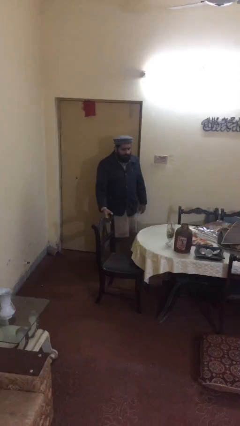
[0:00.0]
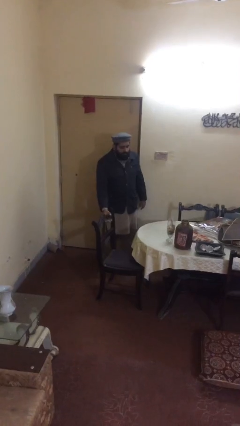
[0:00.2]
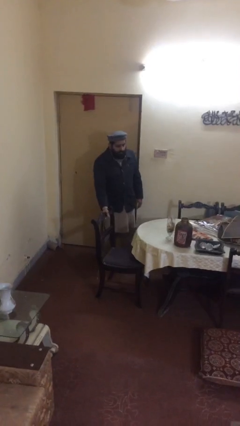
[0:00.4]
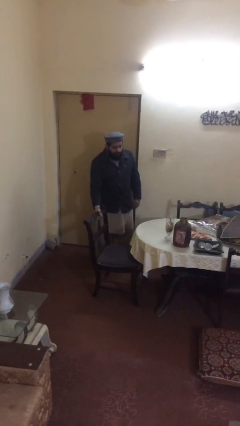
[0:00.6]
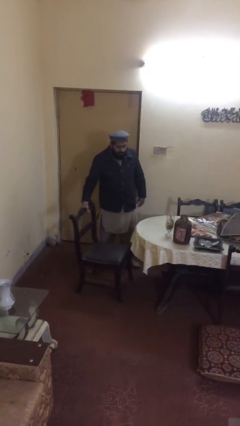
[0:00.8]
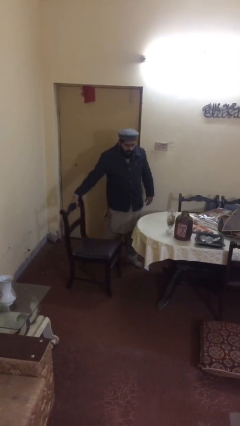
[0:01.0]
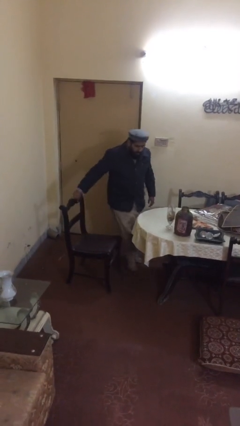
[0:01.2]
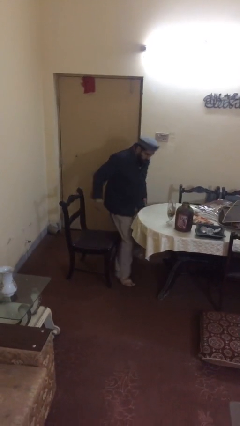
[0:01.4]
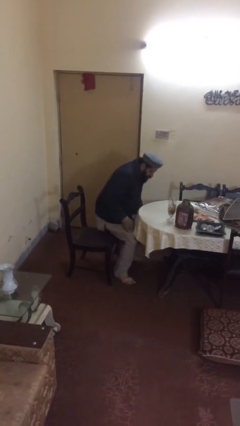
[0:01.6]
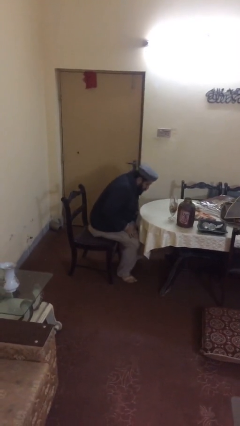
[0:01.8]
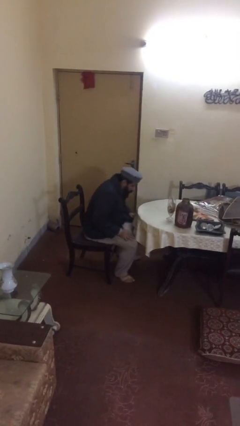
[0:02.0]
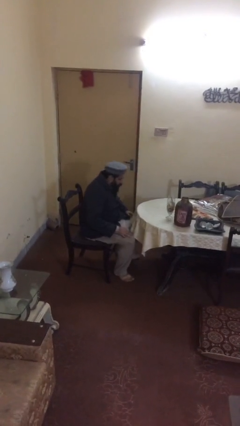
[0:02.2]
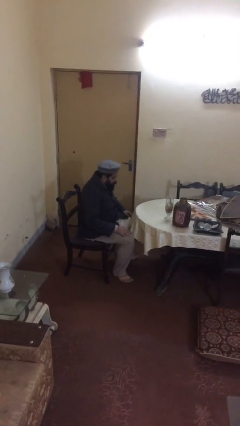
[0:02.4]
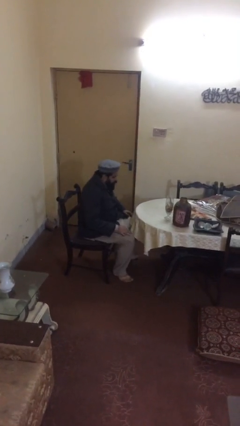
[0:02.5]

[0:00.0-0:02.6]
person sits down

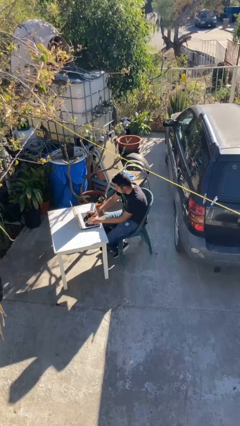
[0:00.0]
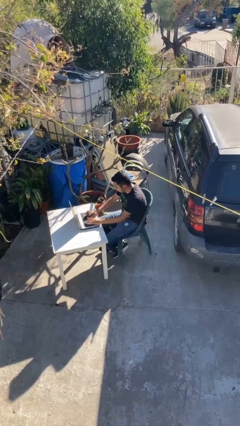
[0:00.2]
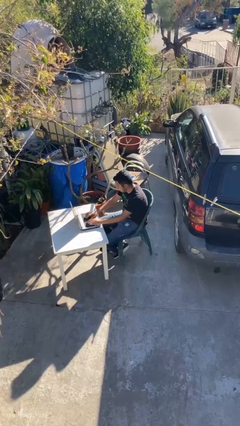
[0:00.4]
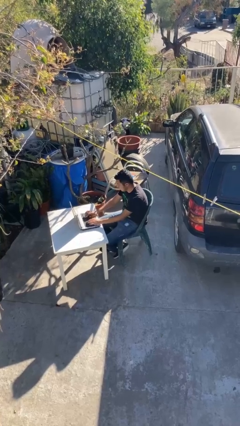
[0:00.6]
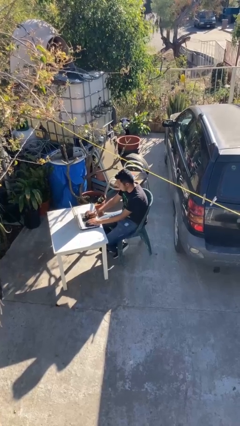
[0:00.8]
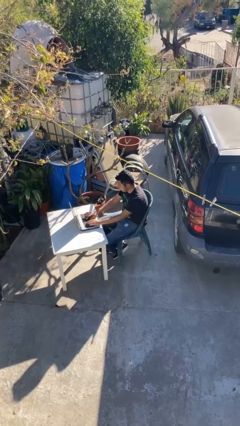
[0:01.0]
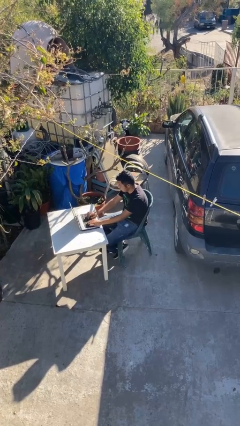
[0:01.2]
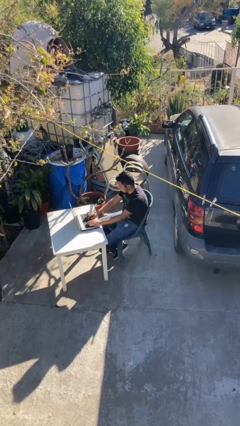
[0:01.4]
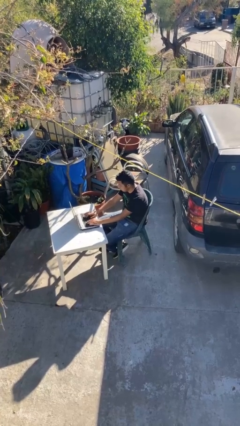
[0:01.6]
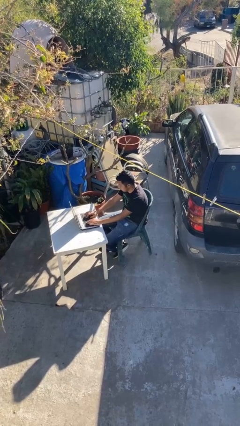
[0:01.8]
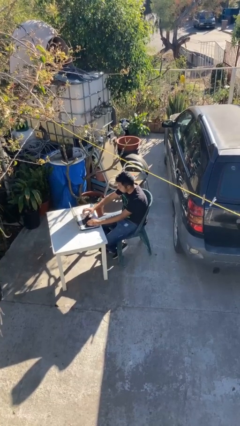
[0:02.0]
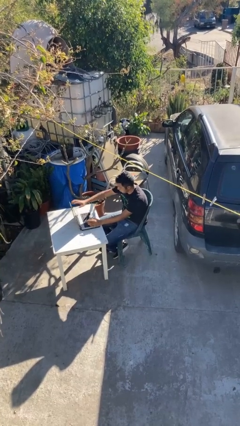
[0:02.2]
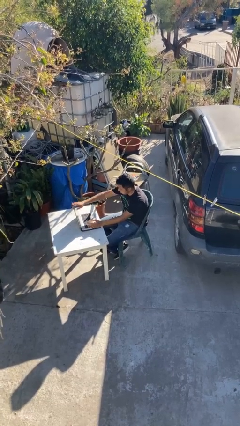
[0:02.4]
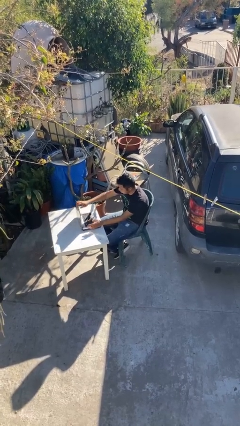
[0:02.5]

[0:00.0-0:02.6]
person interacts with laptop

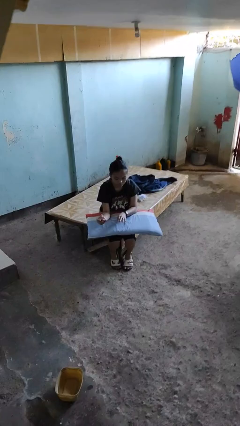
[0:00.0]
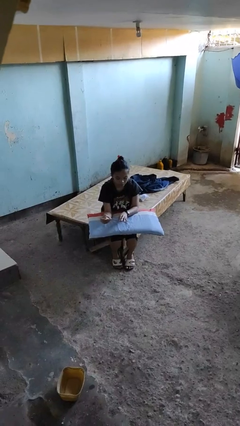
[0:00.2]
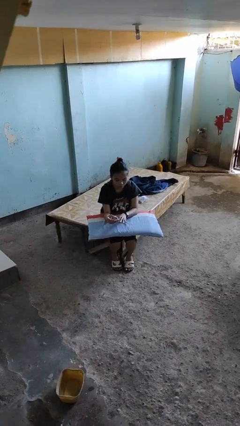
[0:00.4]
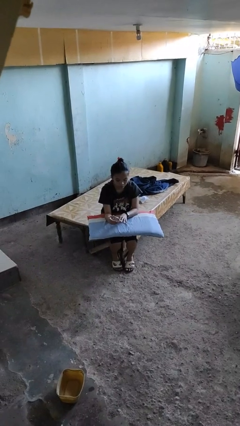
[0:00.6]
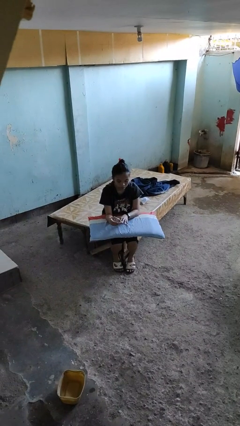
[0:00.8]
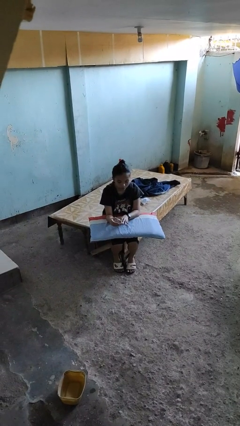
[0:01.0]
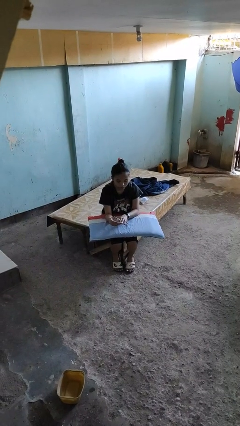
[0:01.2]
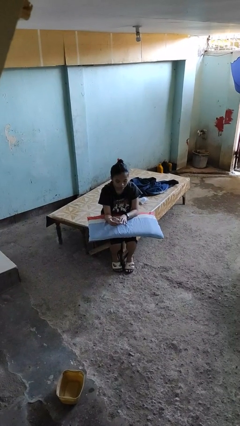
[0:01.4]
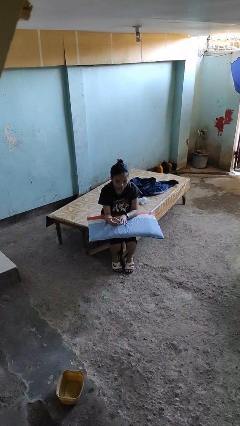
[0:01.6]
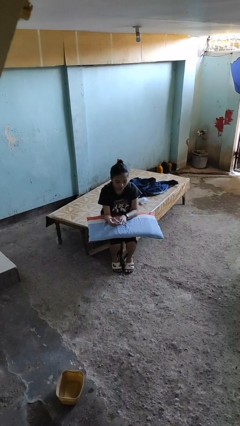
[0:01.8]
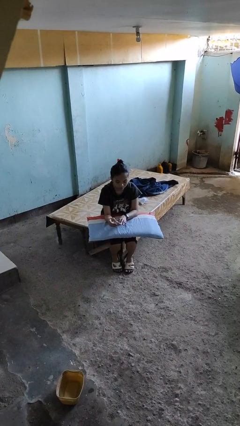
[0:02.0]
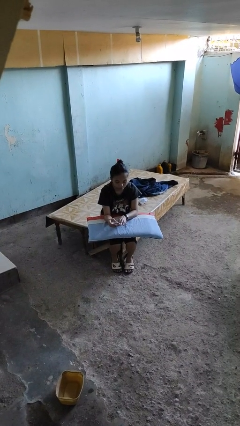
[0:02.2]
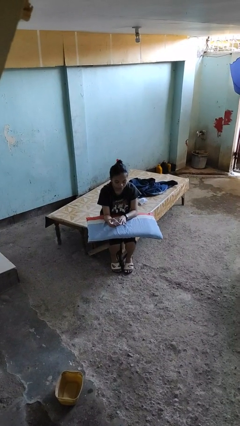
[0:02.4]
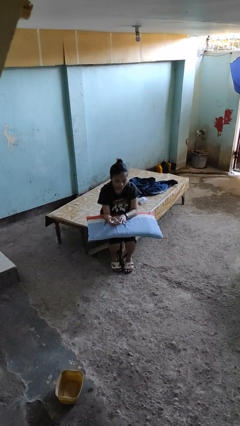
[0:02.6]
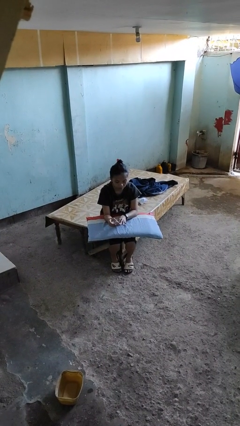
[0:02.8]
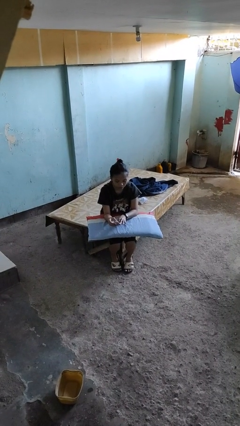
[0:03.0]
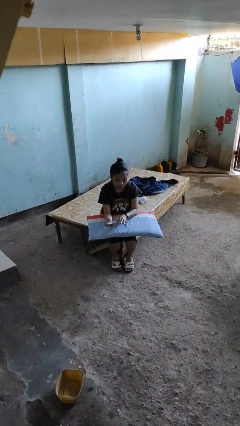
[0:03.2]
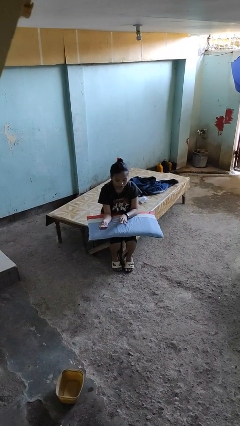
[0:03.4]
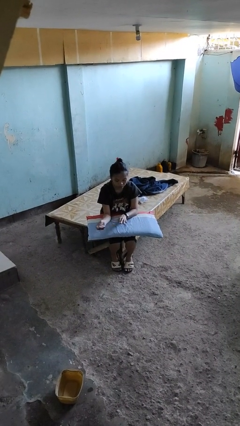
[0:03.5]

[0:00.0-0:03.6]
person clips fingernails

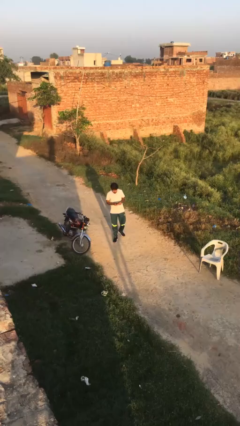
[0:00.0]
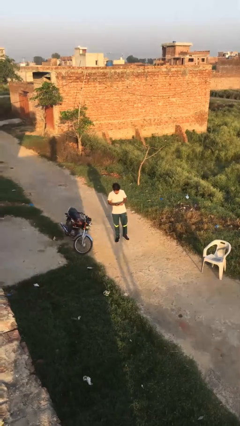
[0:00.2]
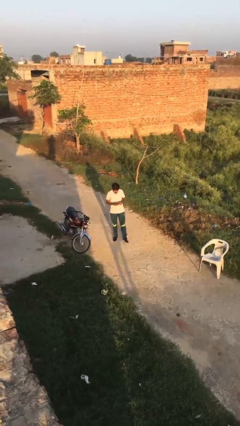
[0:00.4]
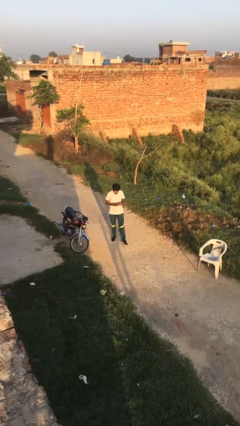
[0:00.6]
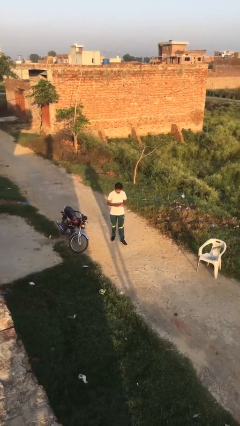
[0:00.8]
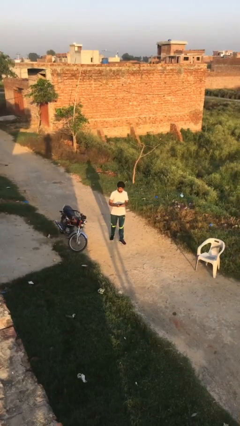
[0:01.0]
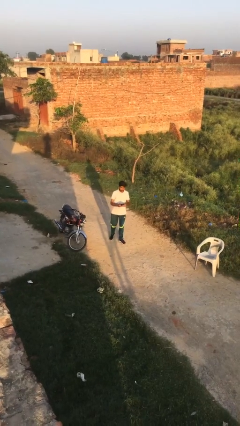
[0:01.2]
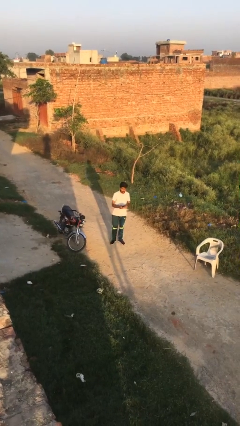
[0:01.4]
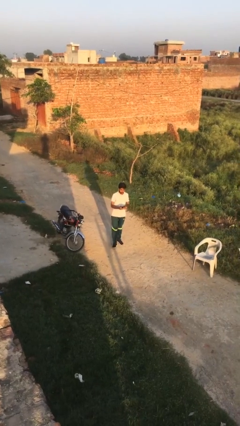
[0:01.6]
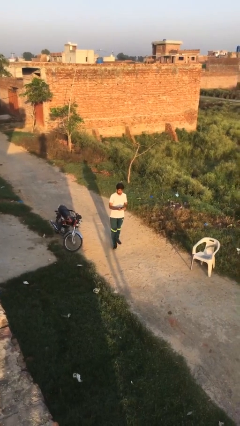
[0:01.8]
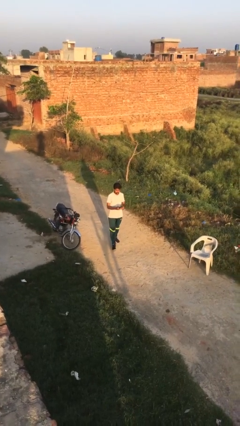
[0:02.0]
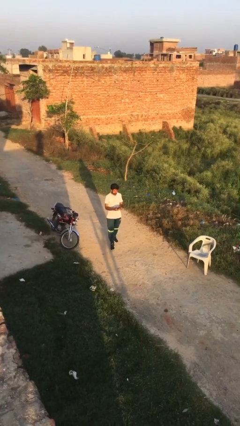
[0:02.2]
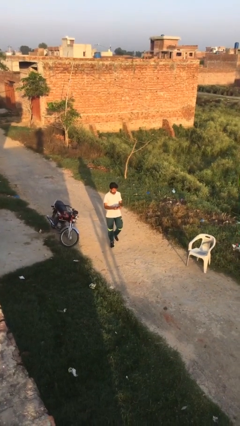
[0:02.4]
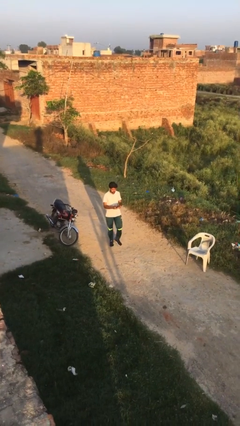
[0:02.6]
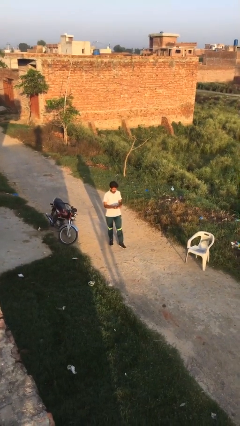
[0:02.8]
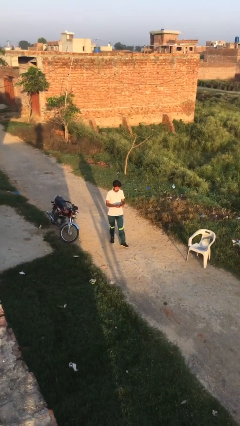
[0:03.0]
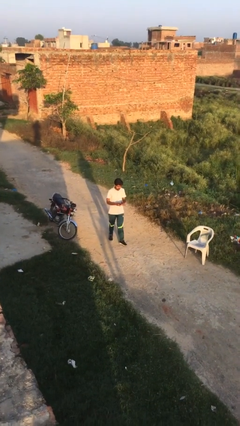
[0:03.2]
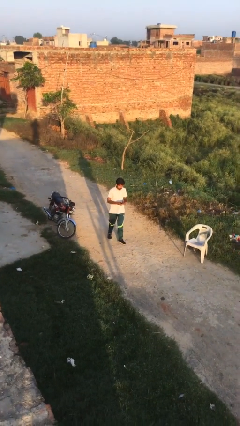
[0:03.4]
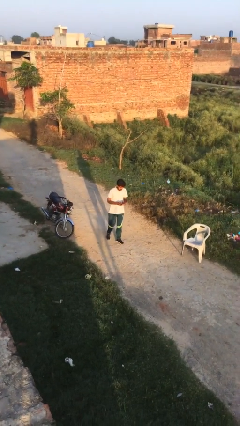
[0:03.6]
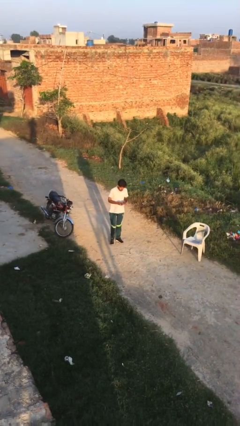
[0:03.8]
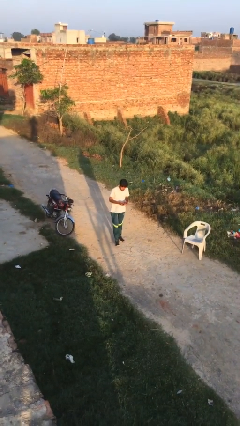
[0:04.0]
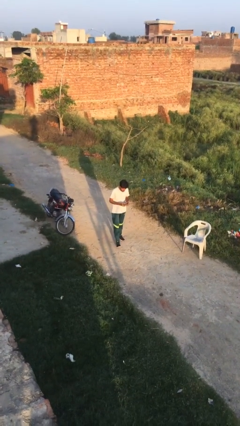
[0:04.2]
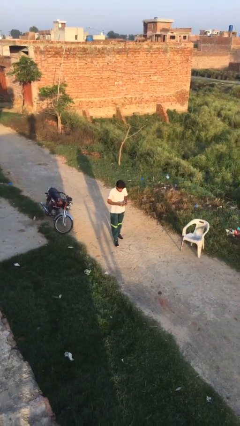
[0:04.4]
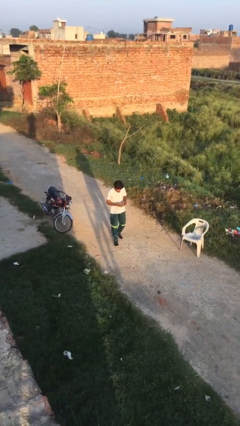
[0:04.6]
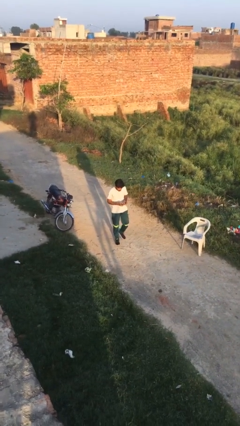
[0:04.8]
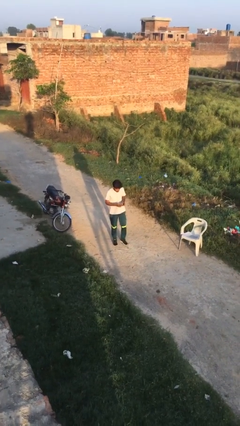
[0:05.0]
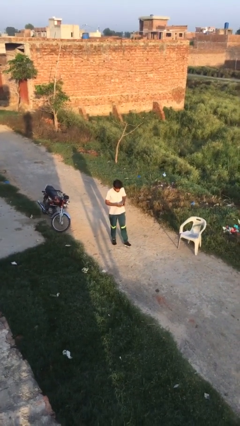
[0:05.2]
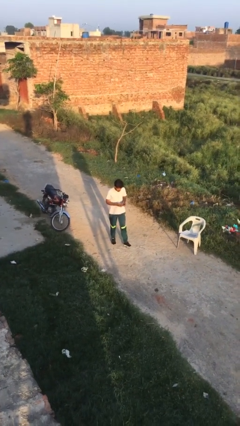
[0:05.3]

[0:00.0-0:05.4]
person texts on phone

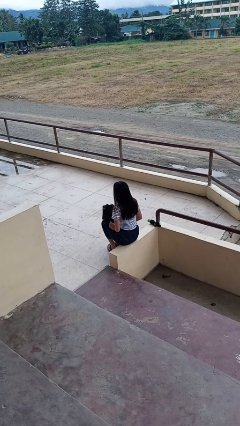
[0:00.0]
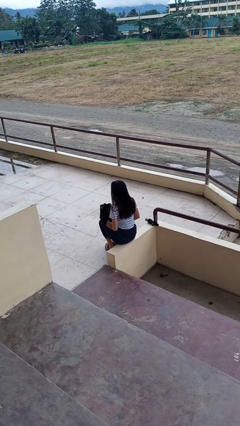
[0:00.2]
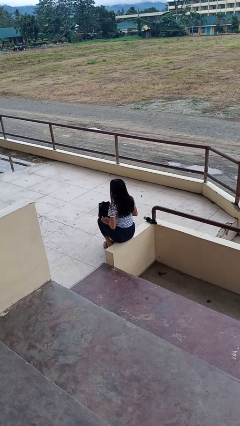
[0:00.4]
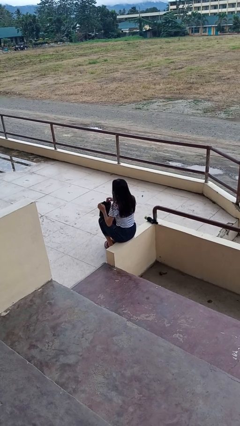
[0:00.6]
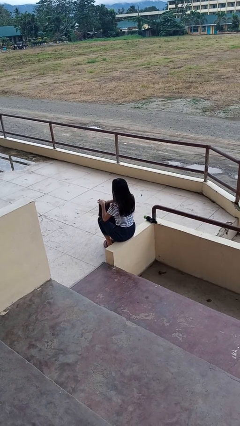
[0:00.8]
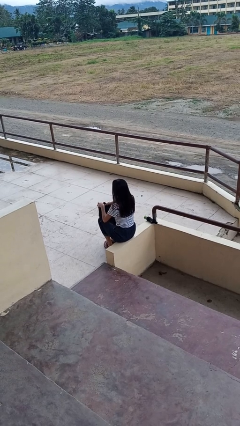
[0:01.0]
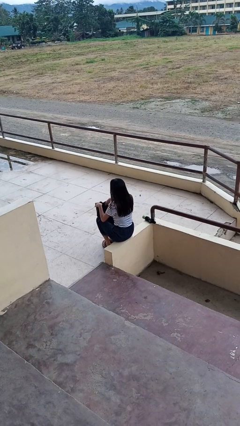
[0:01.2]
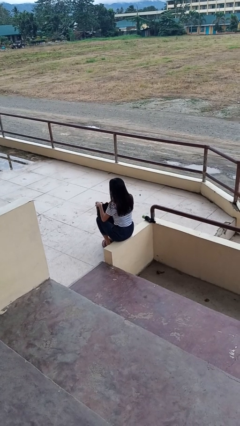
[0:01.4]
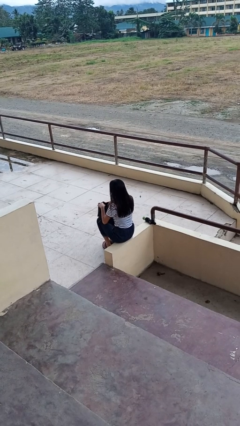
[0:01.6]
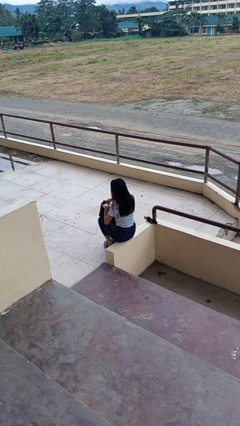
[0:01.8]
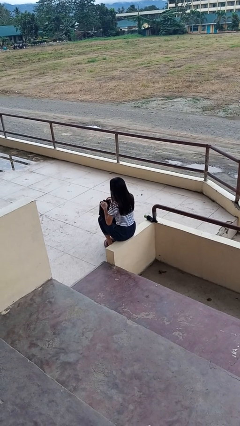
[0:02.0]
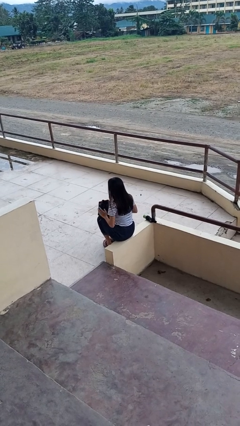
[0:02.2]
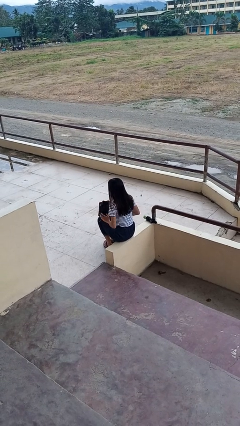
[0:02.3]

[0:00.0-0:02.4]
person searches in couch

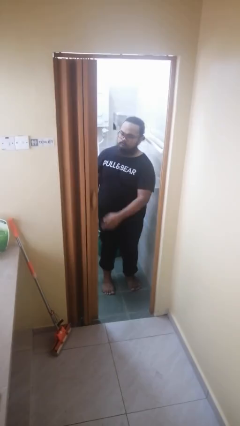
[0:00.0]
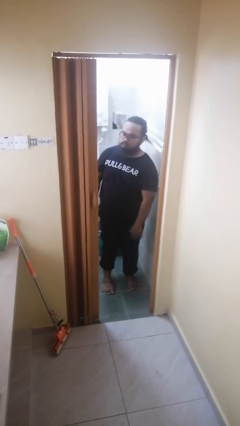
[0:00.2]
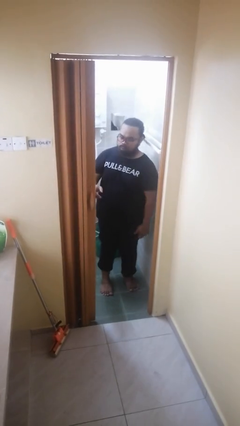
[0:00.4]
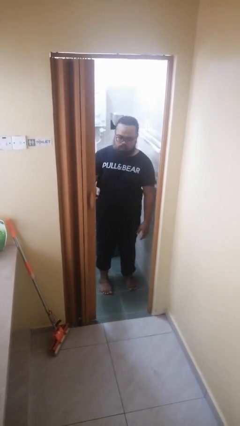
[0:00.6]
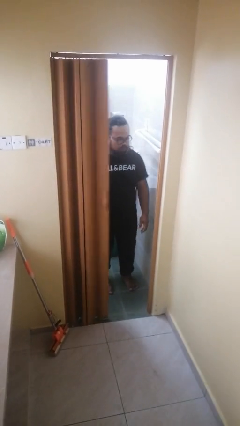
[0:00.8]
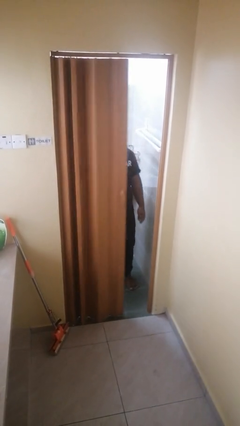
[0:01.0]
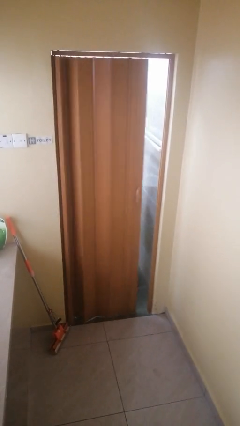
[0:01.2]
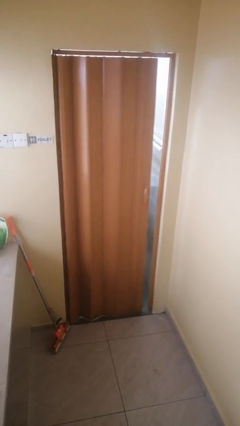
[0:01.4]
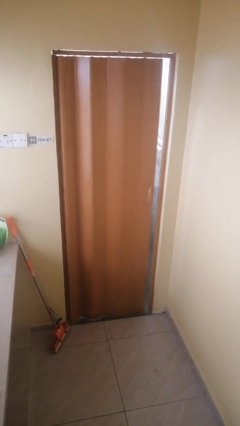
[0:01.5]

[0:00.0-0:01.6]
person closes sliding door
